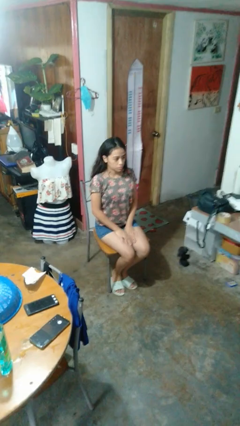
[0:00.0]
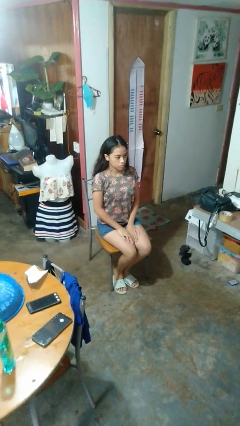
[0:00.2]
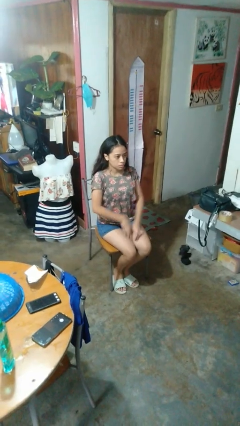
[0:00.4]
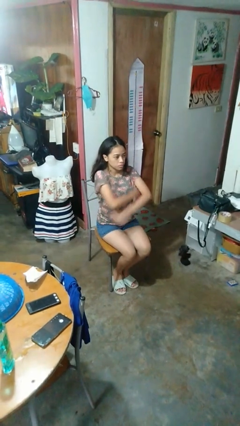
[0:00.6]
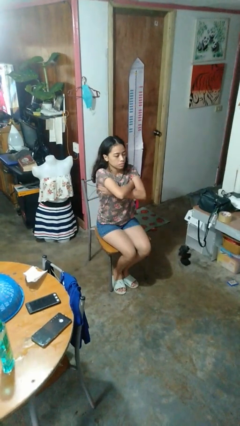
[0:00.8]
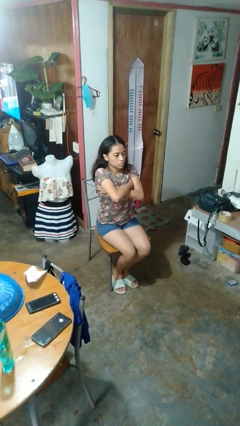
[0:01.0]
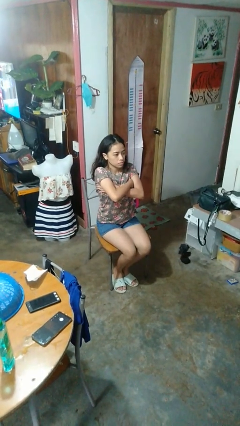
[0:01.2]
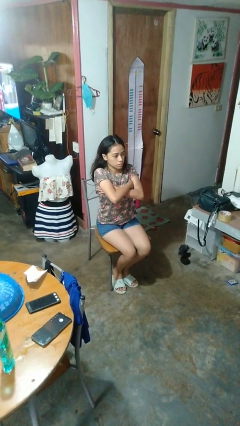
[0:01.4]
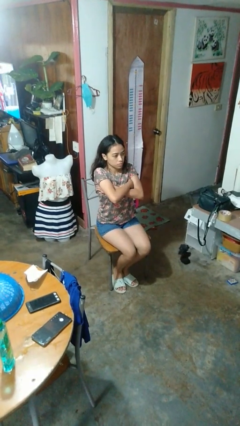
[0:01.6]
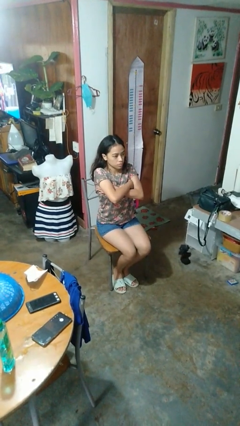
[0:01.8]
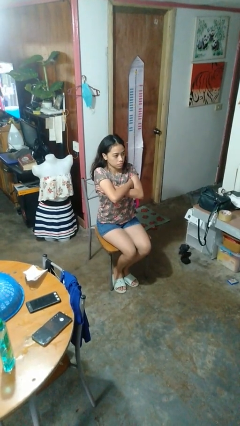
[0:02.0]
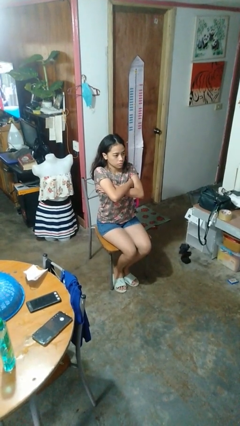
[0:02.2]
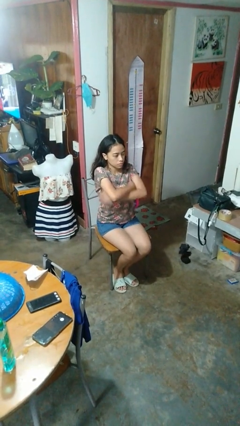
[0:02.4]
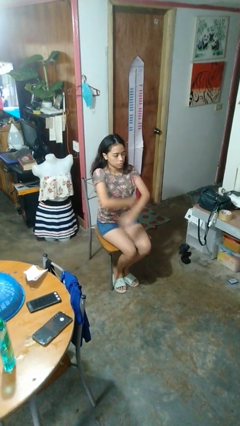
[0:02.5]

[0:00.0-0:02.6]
person crosses arms

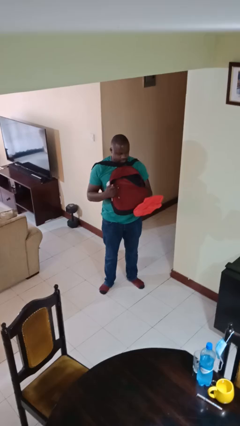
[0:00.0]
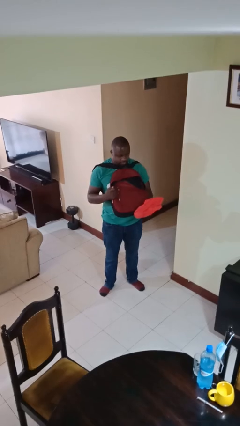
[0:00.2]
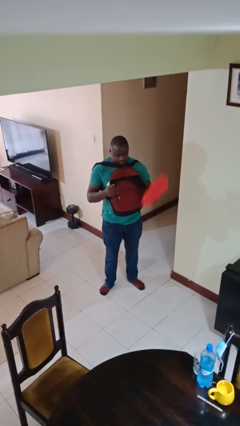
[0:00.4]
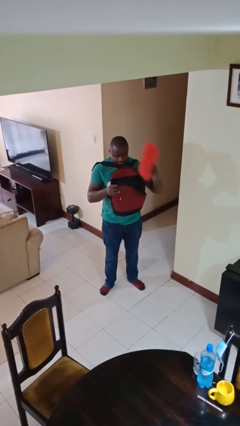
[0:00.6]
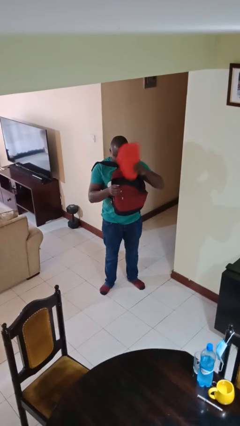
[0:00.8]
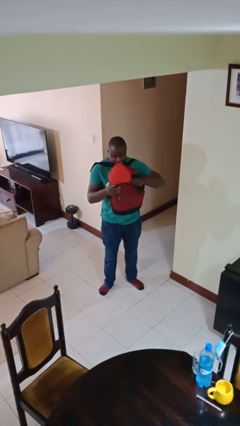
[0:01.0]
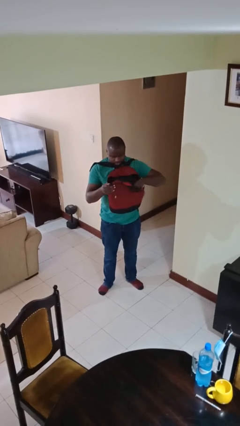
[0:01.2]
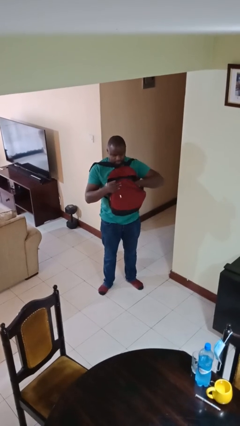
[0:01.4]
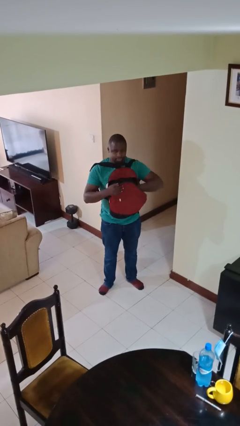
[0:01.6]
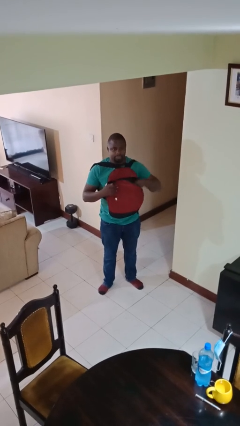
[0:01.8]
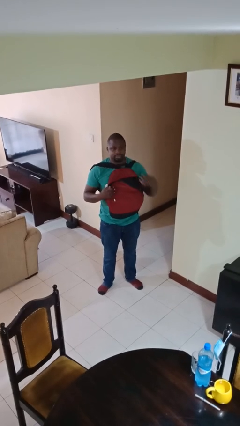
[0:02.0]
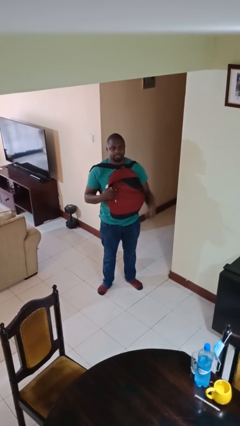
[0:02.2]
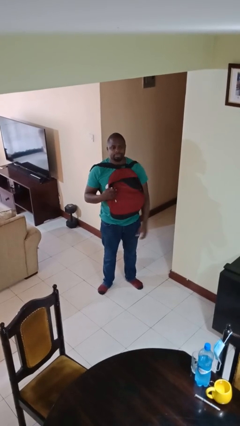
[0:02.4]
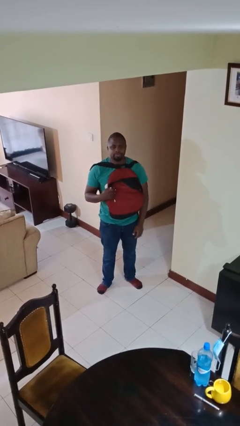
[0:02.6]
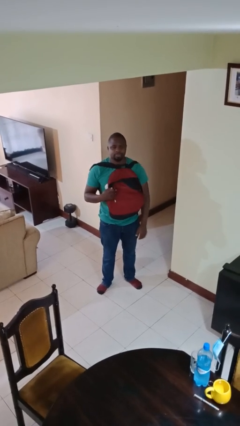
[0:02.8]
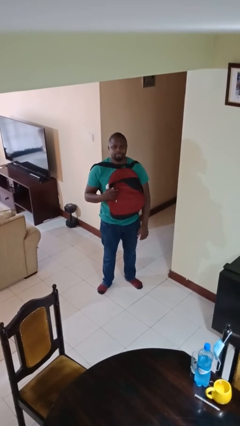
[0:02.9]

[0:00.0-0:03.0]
person puts object into backpack

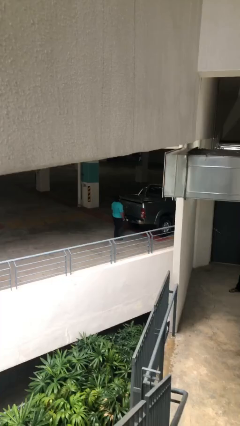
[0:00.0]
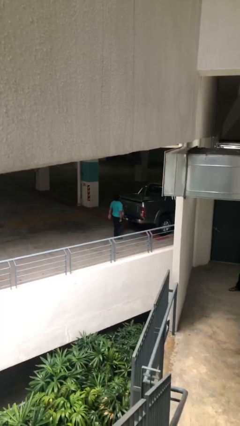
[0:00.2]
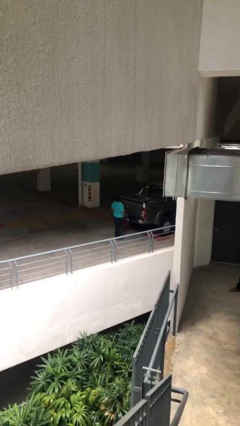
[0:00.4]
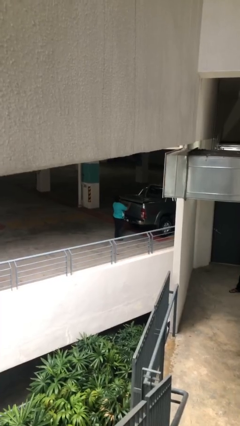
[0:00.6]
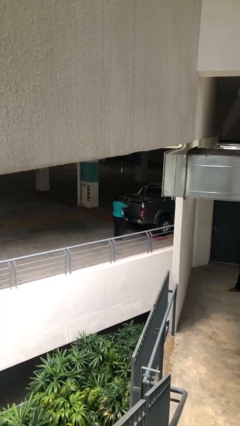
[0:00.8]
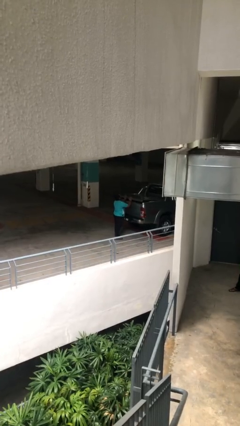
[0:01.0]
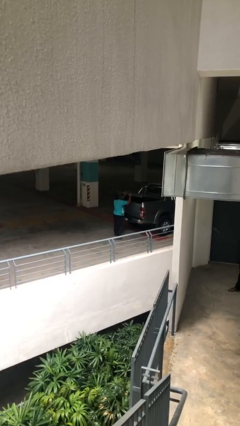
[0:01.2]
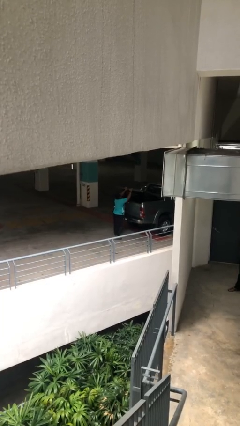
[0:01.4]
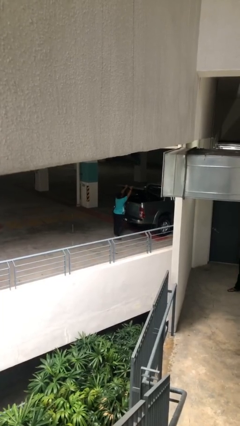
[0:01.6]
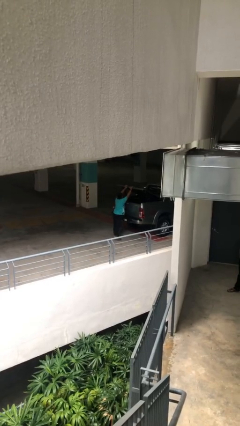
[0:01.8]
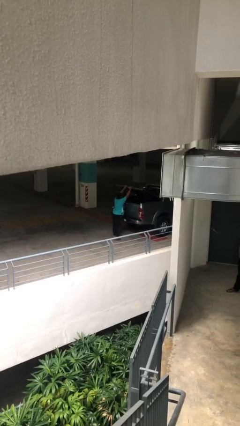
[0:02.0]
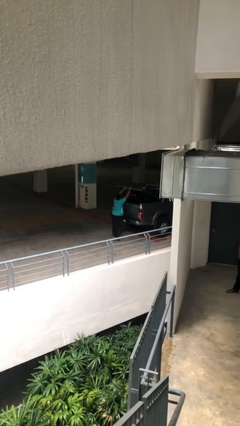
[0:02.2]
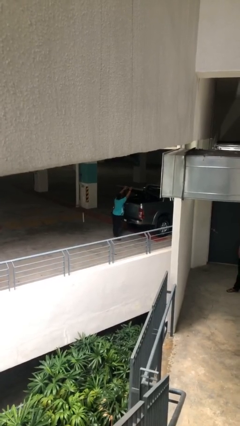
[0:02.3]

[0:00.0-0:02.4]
person opens car trunk

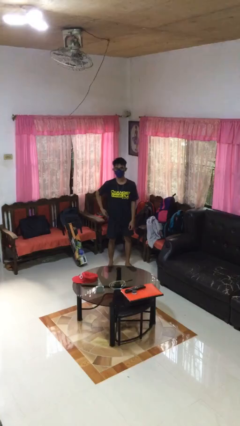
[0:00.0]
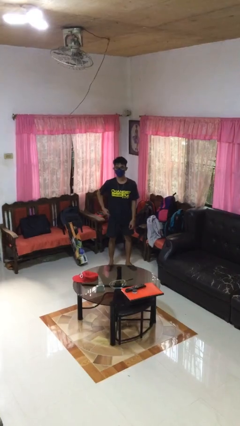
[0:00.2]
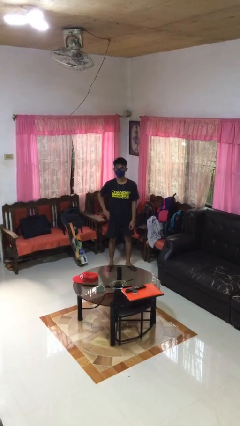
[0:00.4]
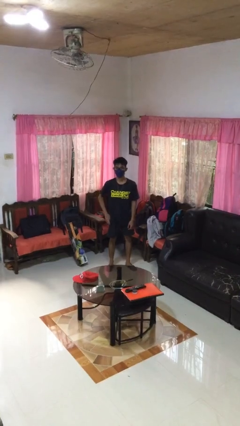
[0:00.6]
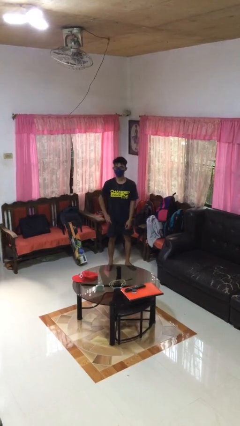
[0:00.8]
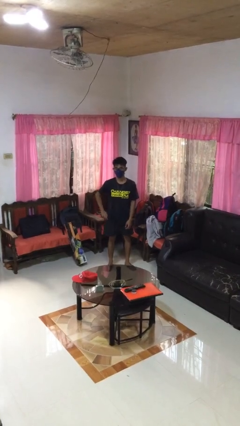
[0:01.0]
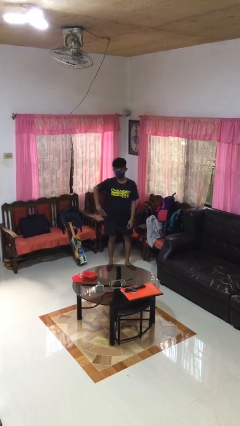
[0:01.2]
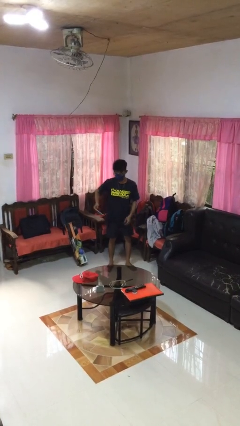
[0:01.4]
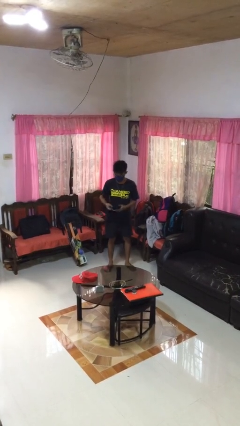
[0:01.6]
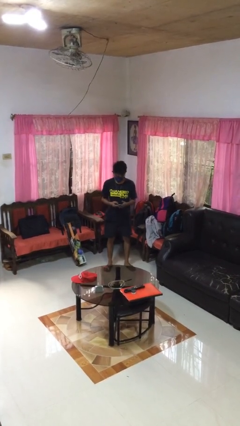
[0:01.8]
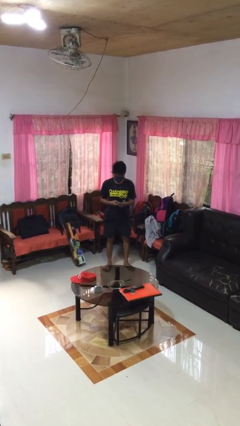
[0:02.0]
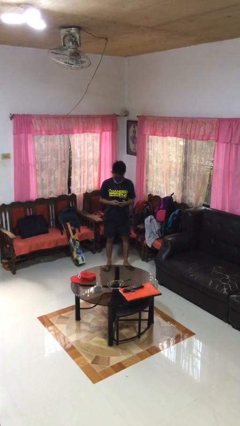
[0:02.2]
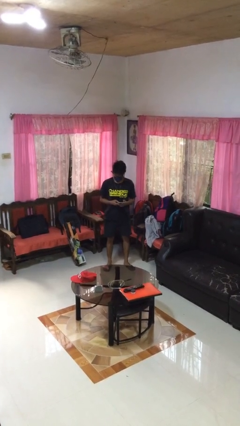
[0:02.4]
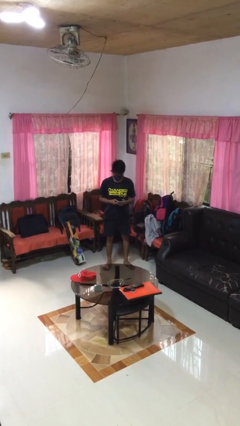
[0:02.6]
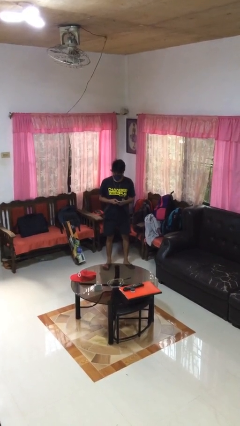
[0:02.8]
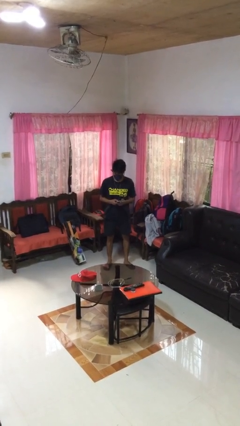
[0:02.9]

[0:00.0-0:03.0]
person takes phone from pocket

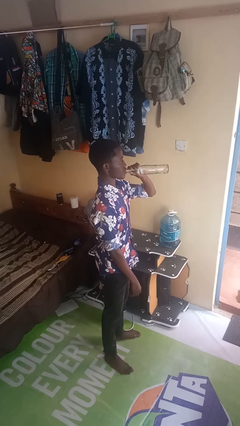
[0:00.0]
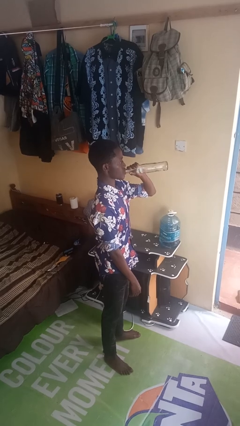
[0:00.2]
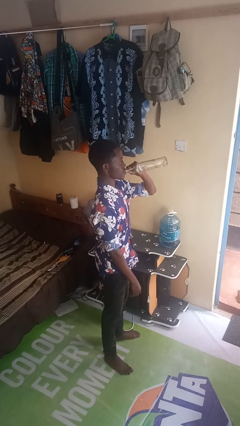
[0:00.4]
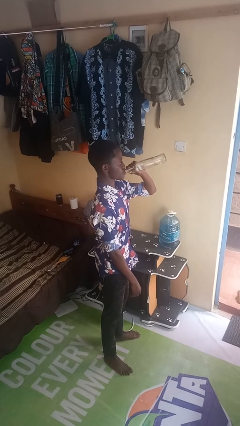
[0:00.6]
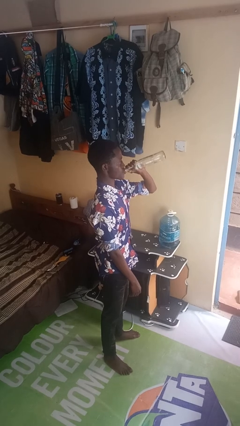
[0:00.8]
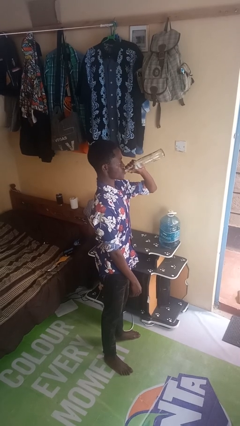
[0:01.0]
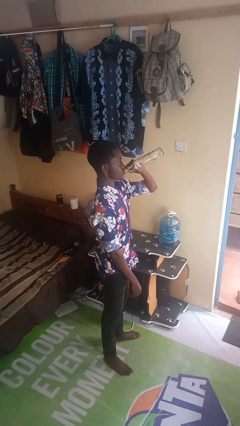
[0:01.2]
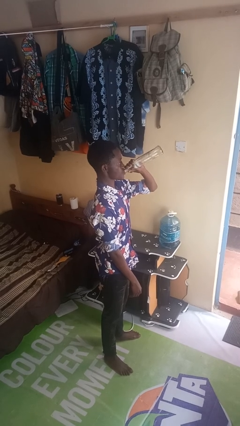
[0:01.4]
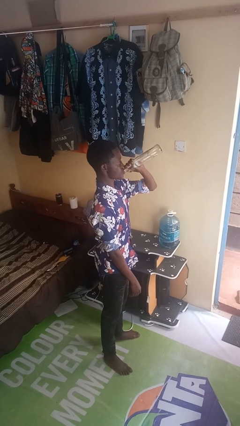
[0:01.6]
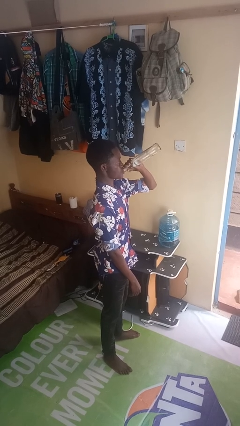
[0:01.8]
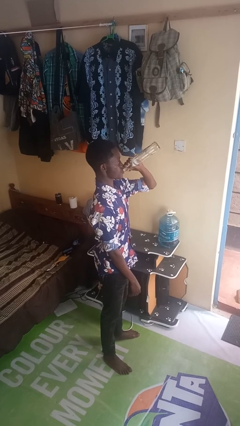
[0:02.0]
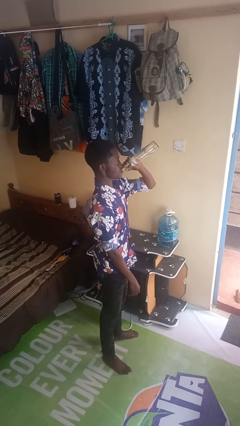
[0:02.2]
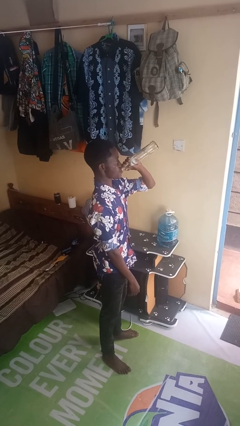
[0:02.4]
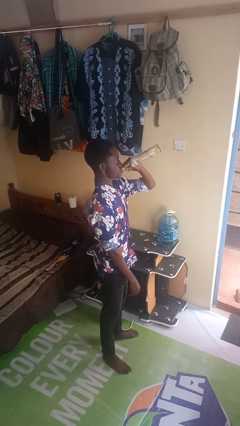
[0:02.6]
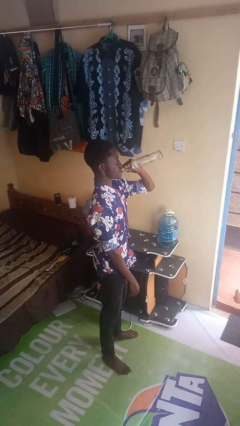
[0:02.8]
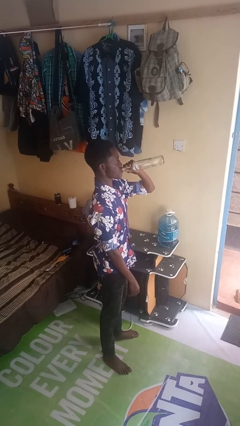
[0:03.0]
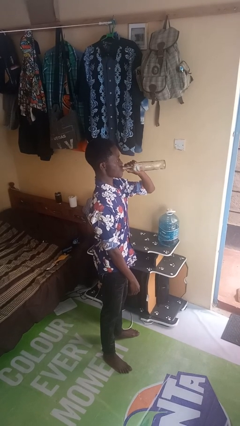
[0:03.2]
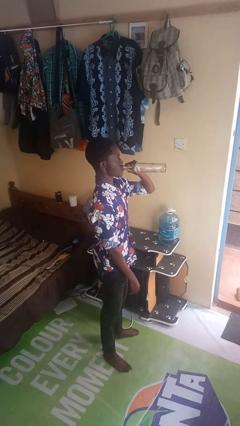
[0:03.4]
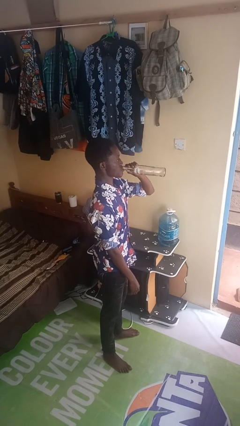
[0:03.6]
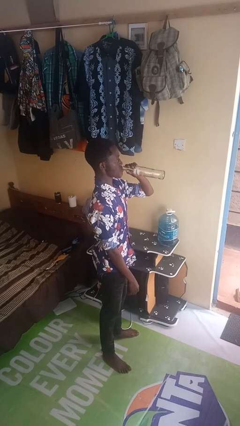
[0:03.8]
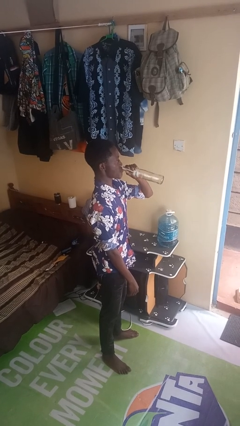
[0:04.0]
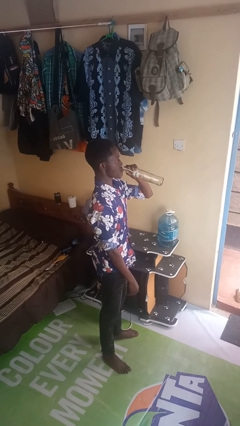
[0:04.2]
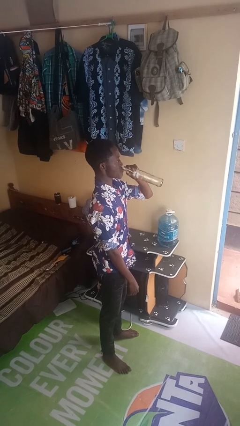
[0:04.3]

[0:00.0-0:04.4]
person drinks from bottle

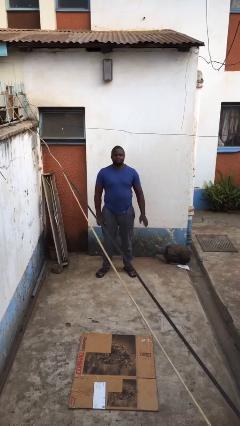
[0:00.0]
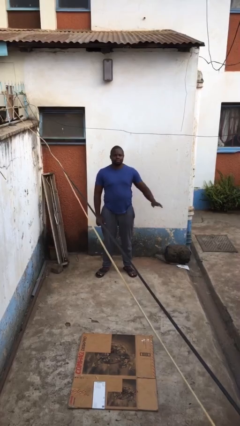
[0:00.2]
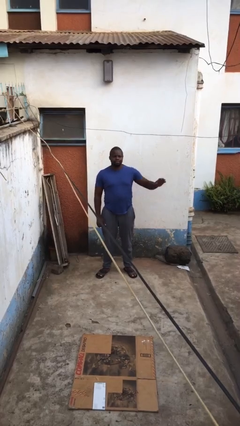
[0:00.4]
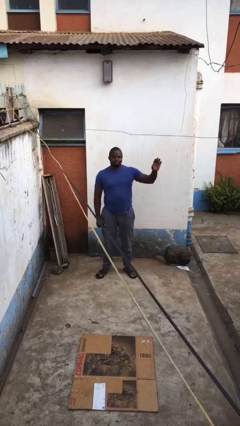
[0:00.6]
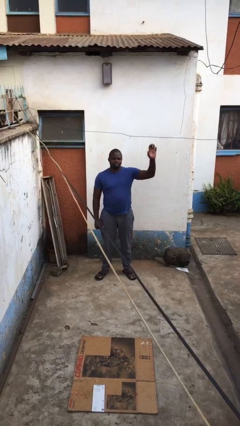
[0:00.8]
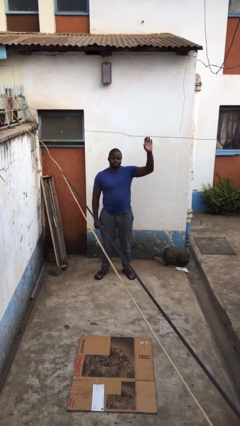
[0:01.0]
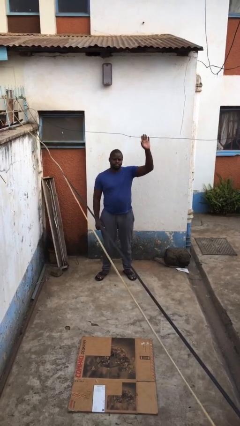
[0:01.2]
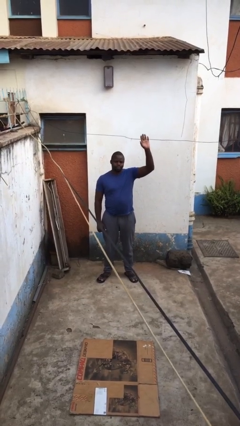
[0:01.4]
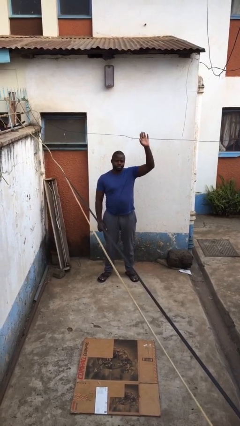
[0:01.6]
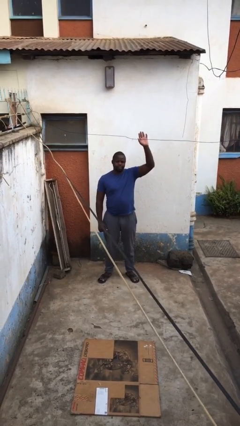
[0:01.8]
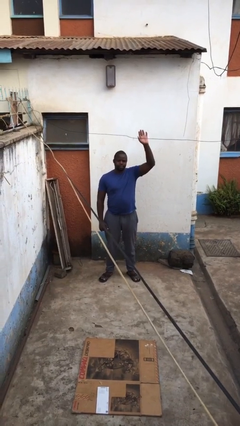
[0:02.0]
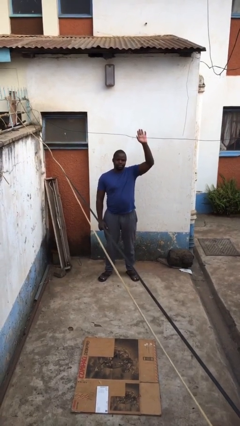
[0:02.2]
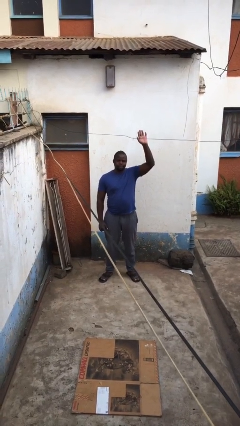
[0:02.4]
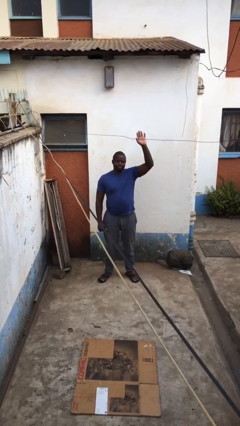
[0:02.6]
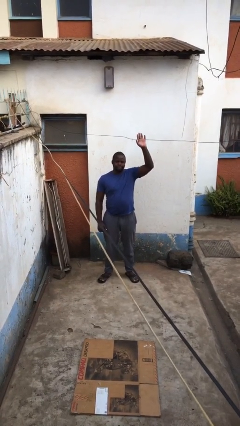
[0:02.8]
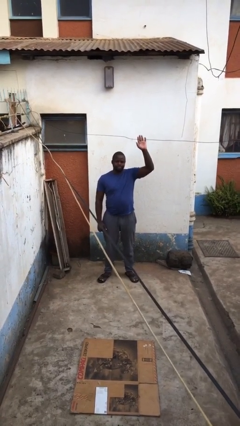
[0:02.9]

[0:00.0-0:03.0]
person gestures raise hand
